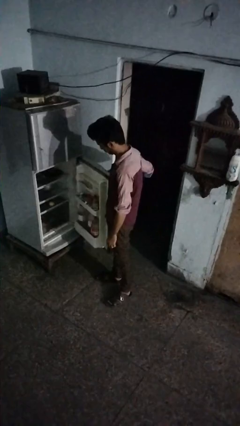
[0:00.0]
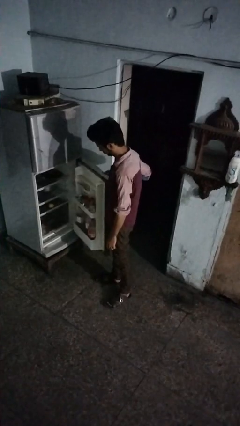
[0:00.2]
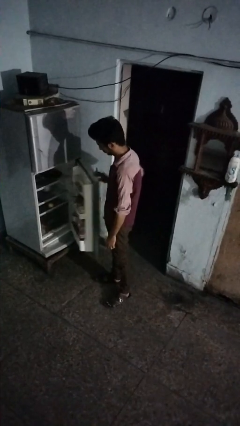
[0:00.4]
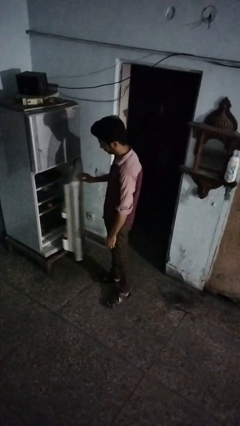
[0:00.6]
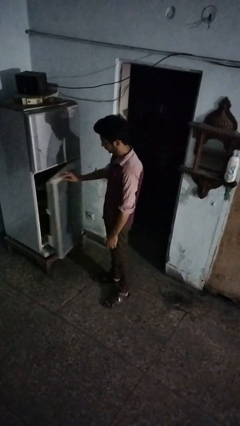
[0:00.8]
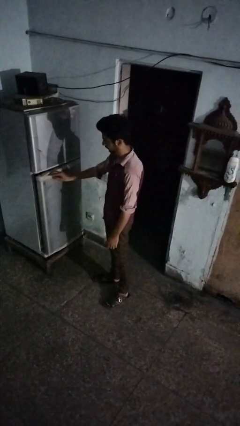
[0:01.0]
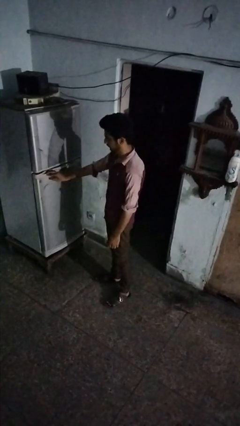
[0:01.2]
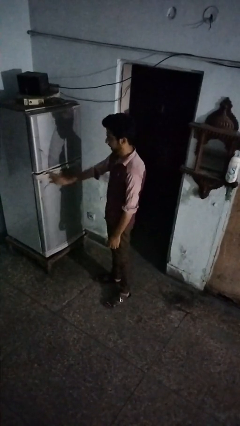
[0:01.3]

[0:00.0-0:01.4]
person closes refrigerator

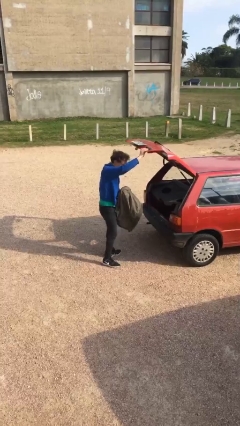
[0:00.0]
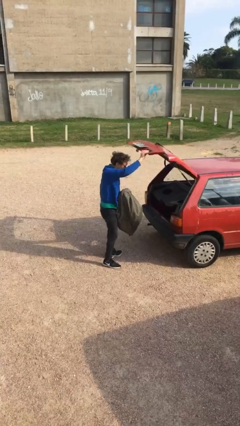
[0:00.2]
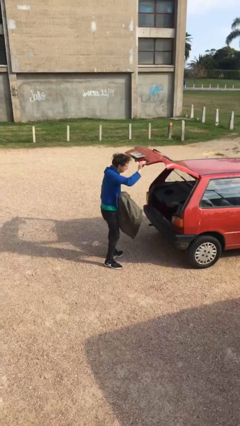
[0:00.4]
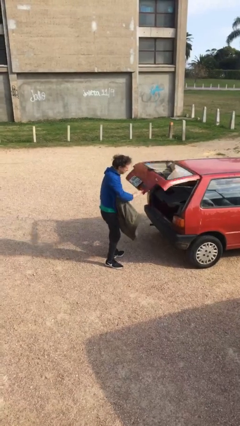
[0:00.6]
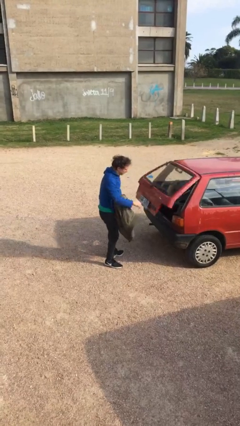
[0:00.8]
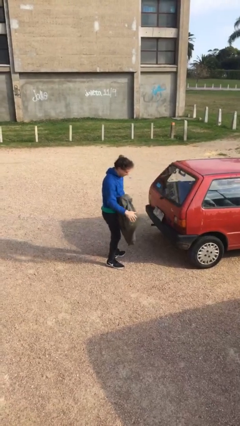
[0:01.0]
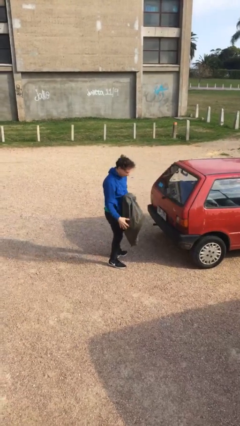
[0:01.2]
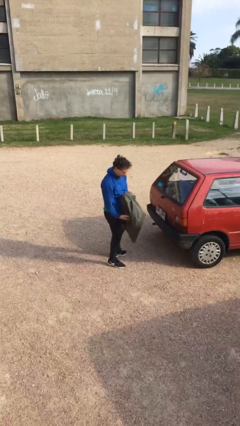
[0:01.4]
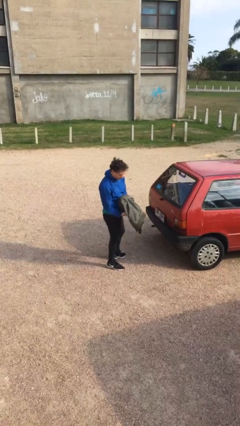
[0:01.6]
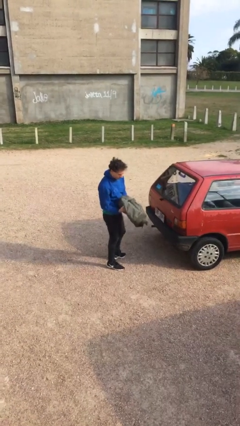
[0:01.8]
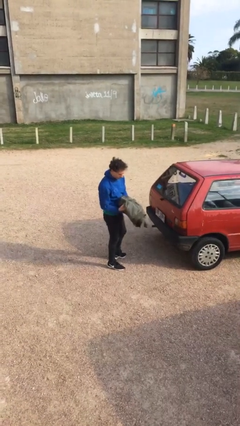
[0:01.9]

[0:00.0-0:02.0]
person closes car door

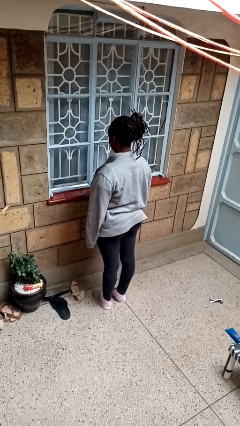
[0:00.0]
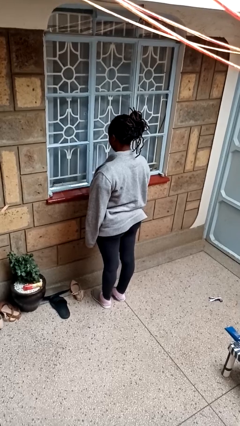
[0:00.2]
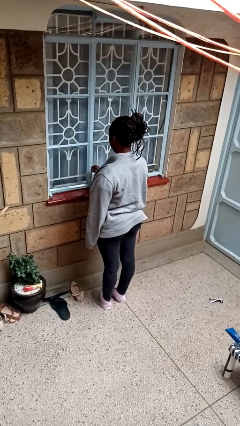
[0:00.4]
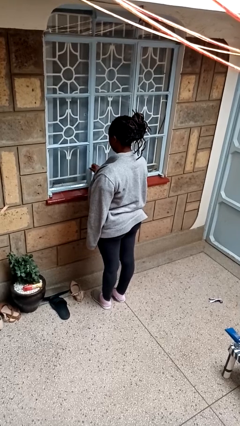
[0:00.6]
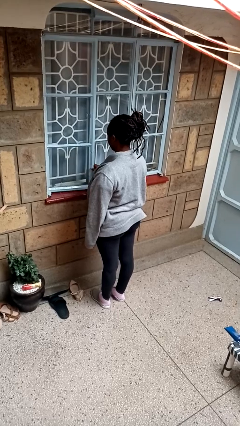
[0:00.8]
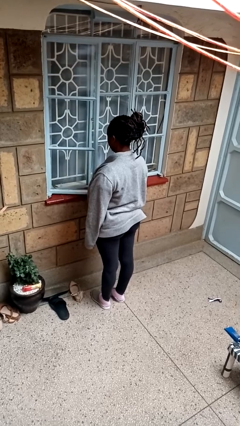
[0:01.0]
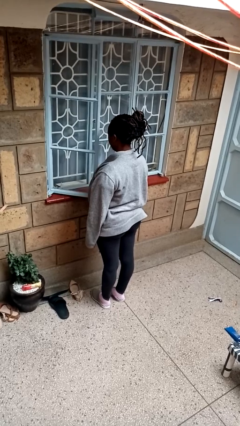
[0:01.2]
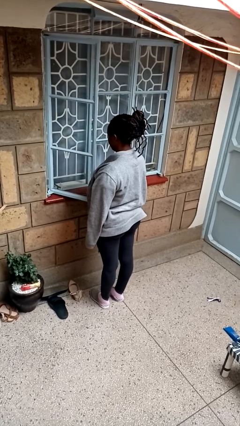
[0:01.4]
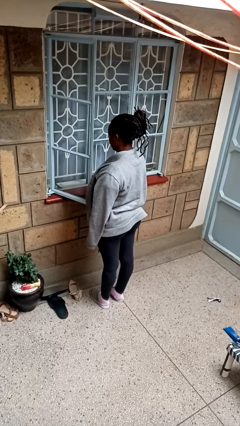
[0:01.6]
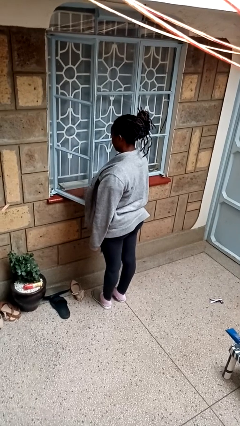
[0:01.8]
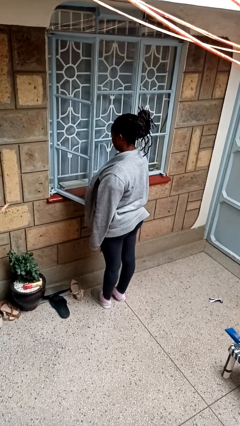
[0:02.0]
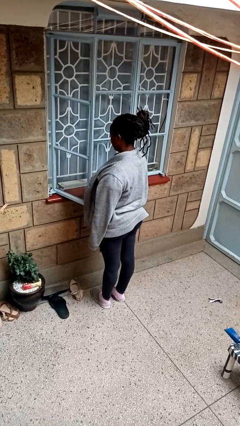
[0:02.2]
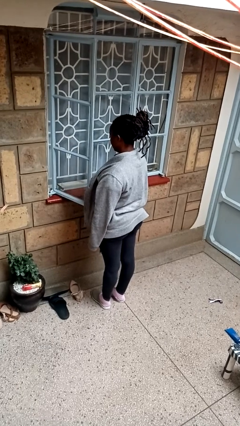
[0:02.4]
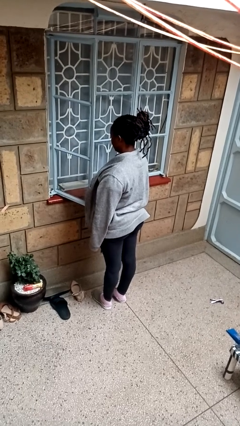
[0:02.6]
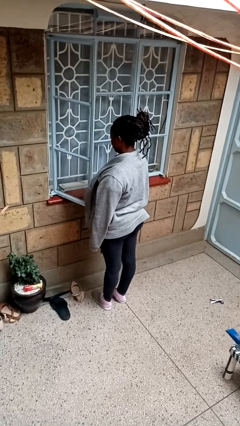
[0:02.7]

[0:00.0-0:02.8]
person opens home window

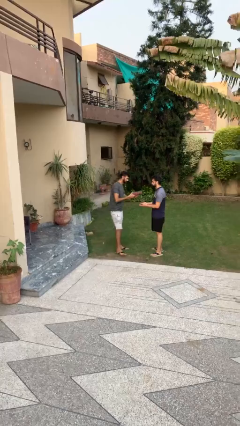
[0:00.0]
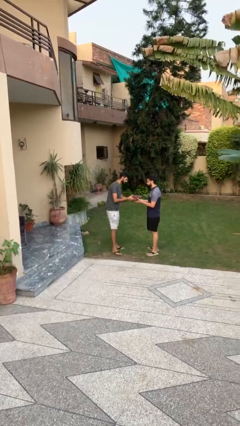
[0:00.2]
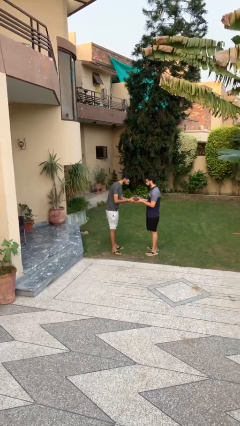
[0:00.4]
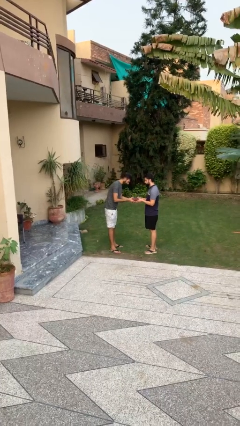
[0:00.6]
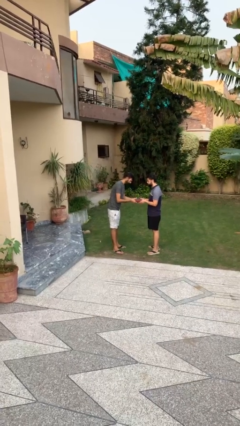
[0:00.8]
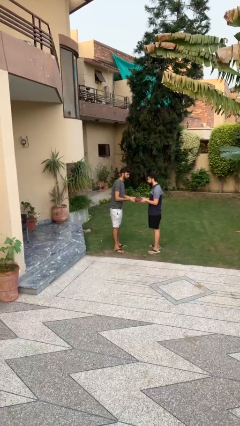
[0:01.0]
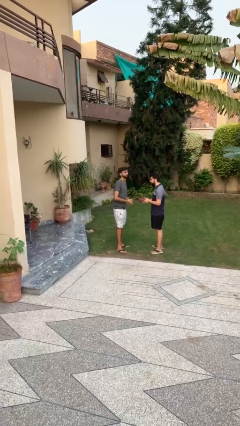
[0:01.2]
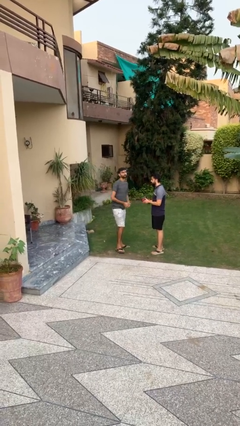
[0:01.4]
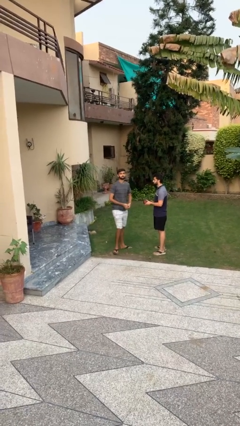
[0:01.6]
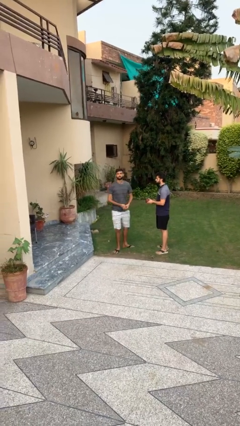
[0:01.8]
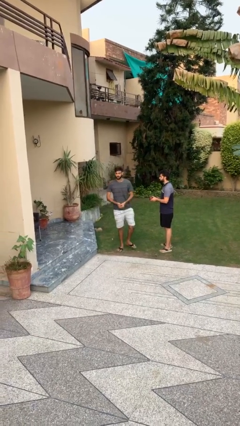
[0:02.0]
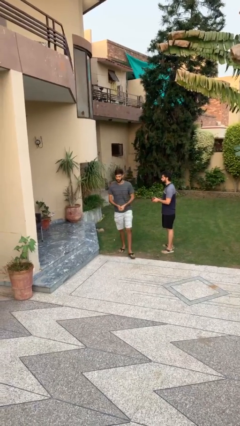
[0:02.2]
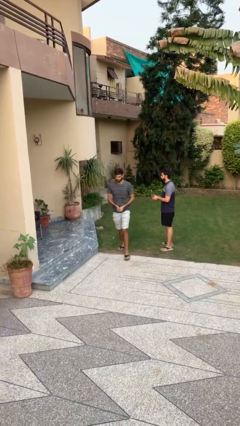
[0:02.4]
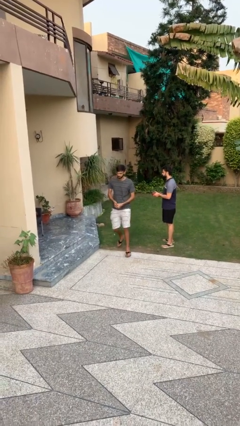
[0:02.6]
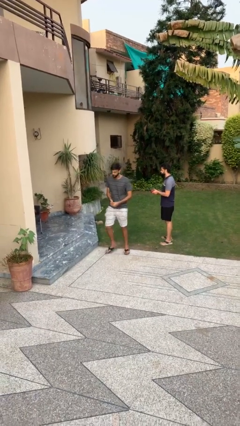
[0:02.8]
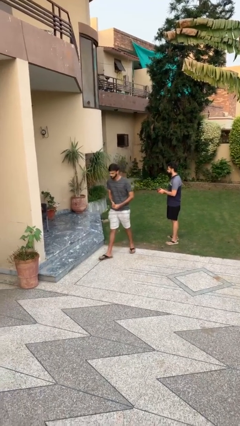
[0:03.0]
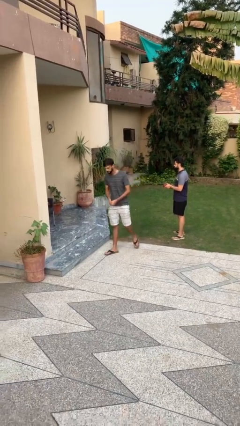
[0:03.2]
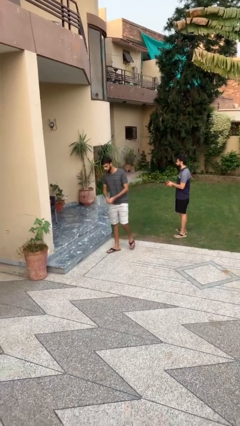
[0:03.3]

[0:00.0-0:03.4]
person transfers object to person

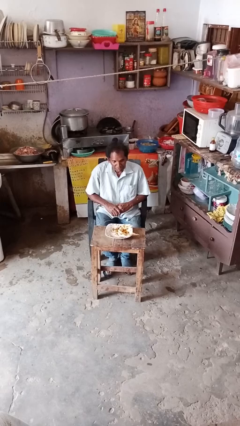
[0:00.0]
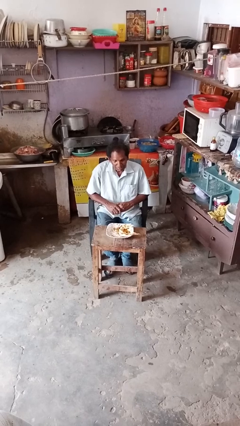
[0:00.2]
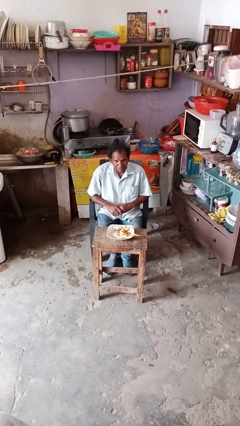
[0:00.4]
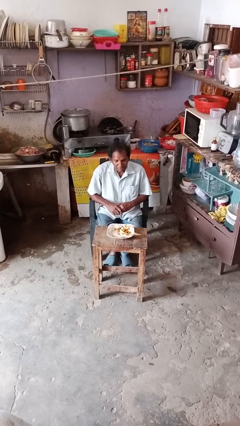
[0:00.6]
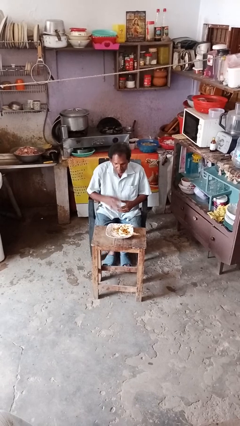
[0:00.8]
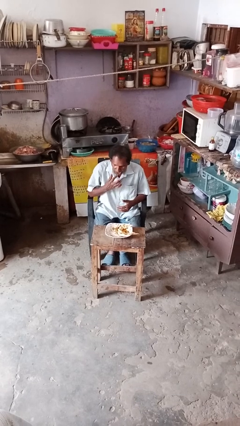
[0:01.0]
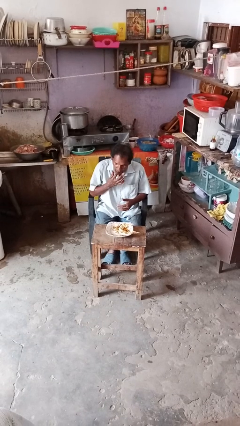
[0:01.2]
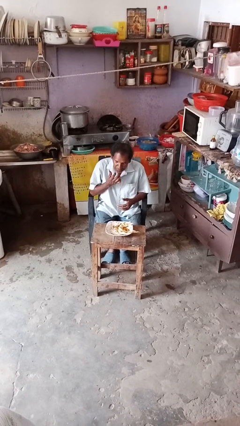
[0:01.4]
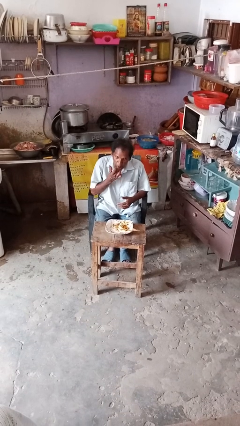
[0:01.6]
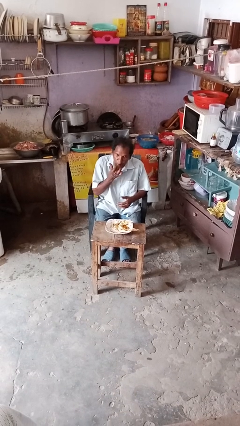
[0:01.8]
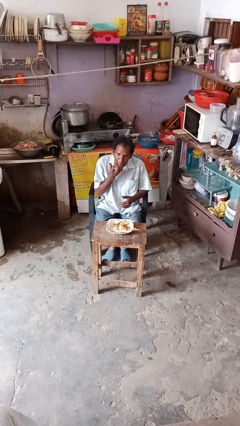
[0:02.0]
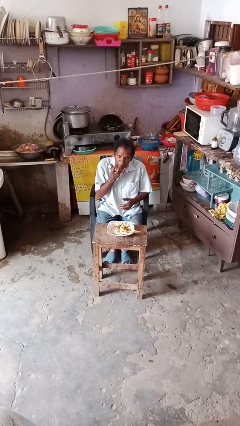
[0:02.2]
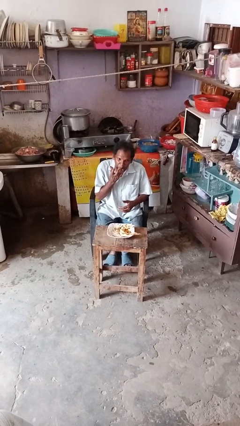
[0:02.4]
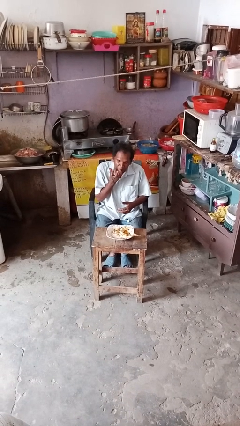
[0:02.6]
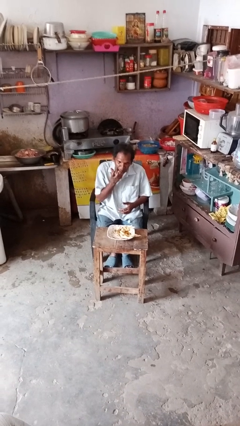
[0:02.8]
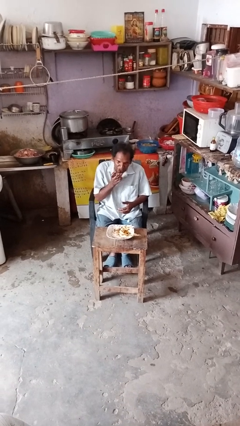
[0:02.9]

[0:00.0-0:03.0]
person licks fingers

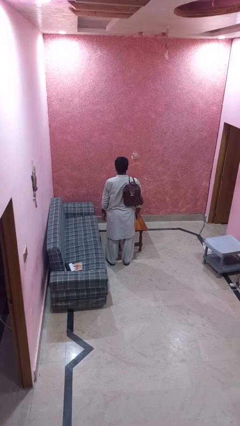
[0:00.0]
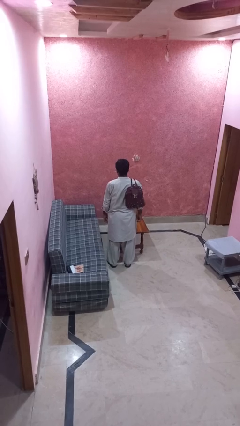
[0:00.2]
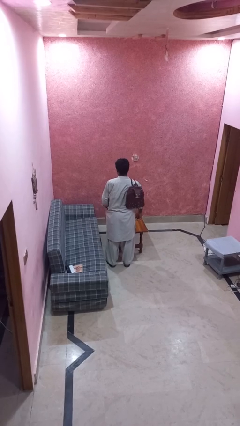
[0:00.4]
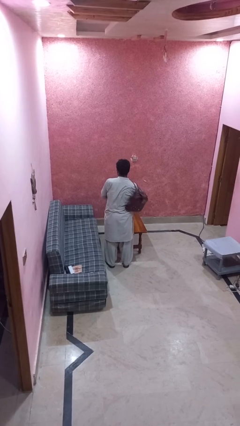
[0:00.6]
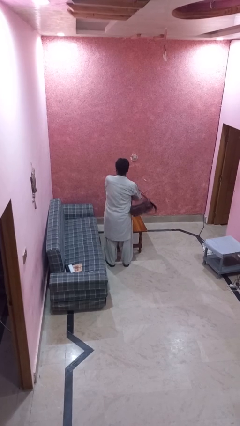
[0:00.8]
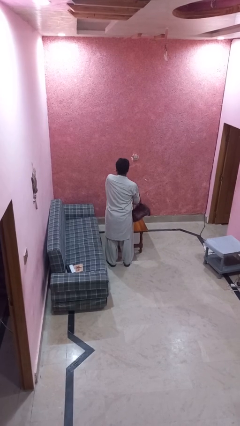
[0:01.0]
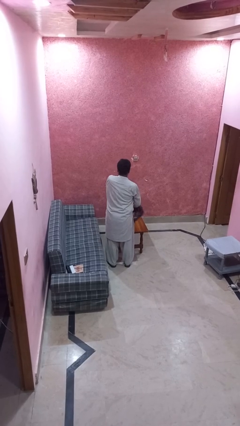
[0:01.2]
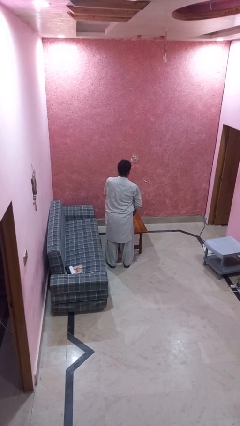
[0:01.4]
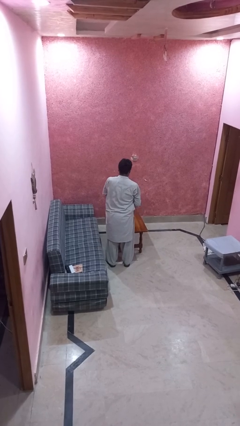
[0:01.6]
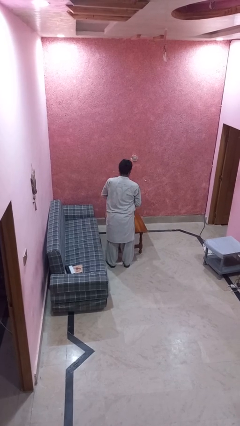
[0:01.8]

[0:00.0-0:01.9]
person takes off backpack

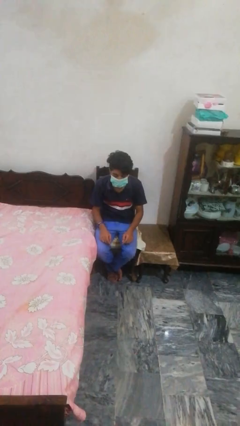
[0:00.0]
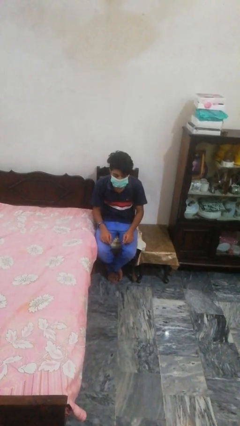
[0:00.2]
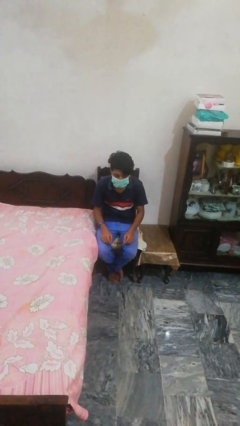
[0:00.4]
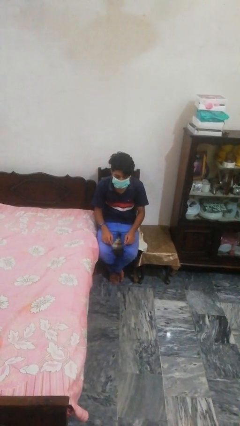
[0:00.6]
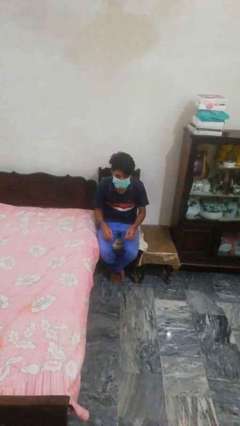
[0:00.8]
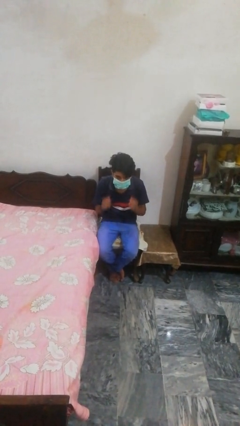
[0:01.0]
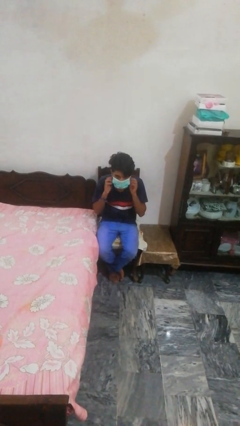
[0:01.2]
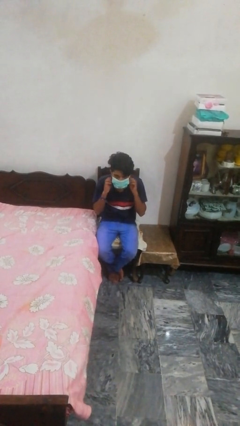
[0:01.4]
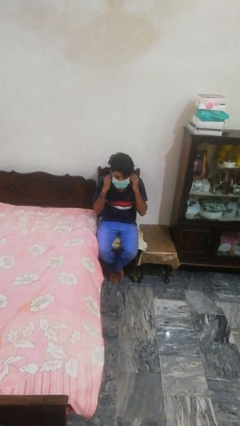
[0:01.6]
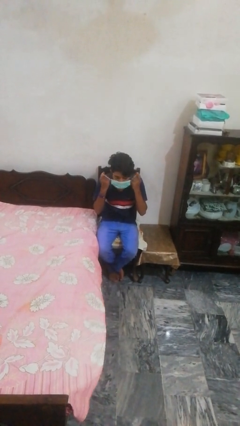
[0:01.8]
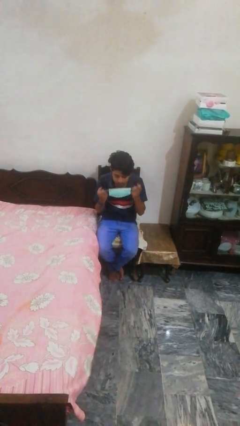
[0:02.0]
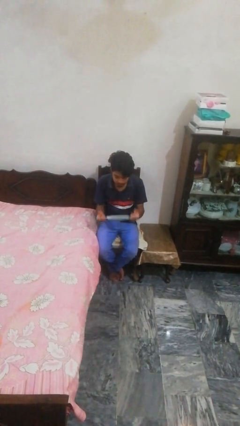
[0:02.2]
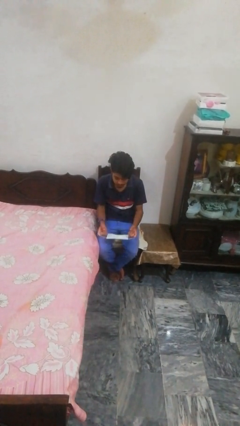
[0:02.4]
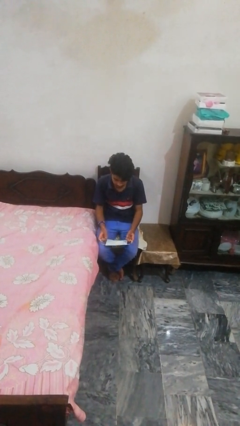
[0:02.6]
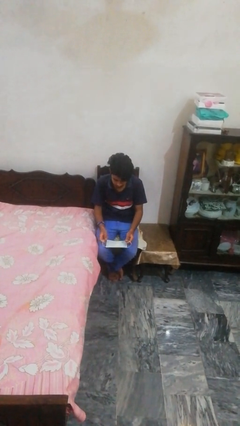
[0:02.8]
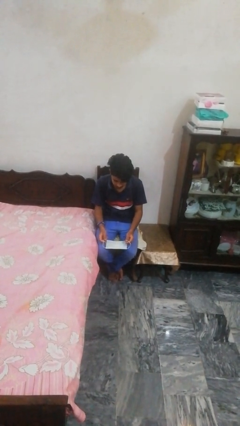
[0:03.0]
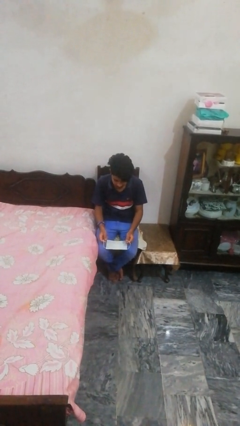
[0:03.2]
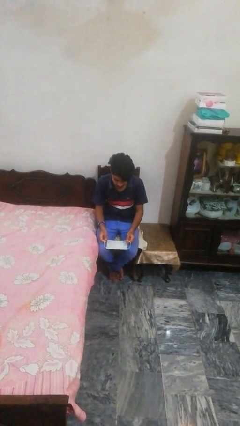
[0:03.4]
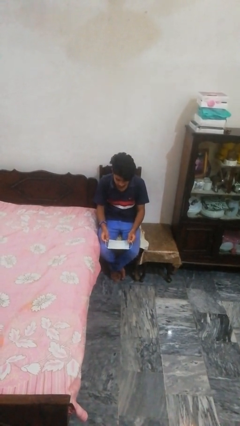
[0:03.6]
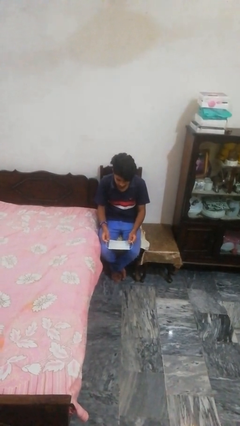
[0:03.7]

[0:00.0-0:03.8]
person takes off facemask
